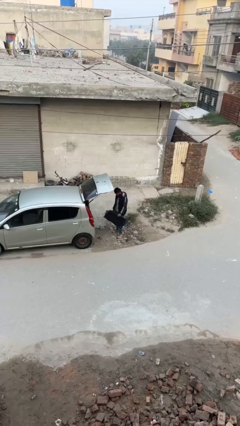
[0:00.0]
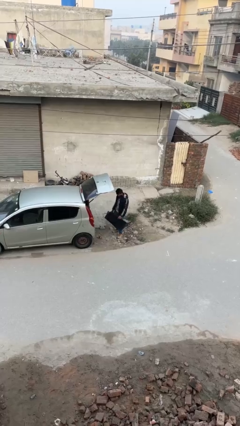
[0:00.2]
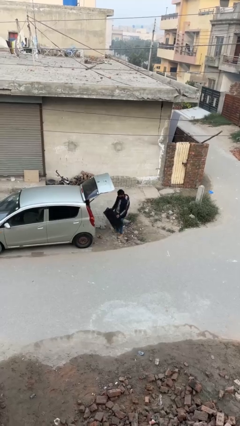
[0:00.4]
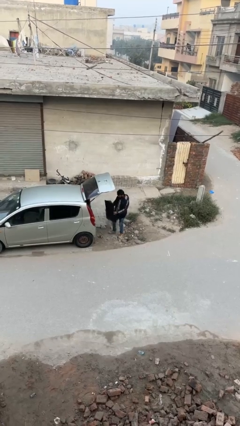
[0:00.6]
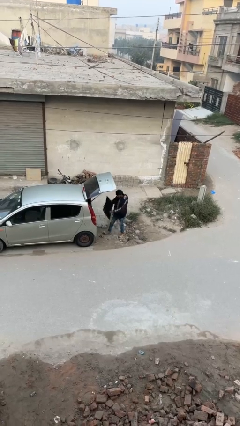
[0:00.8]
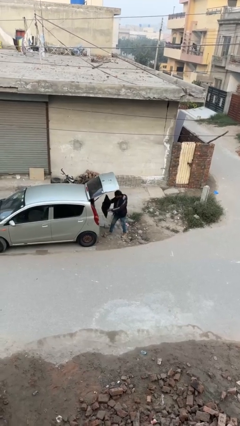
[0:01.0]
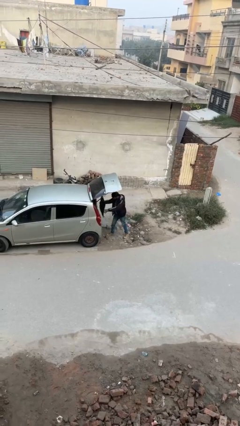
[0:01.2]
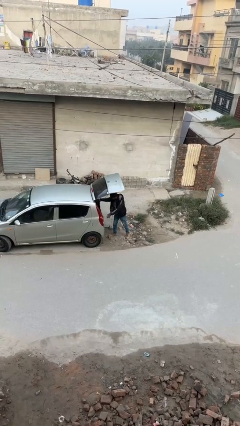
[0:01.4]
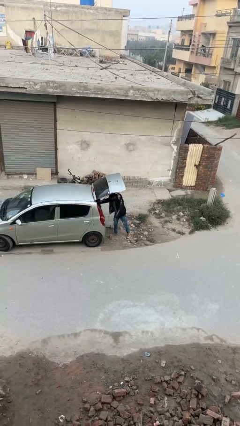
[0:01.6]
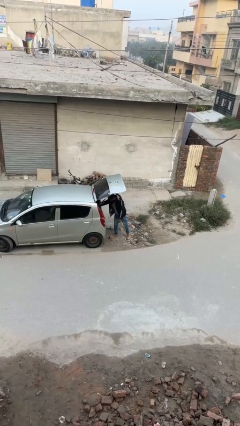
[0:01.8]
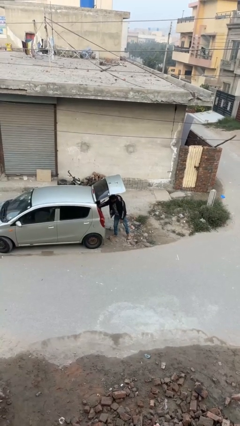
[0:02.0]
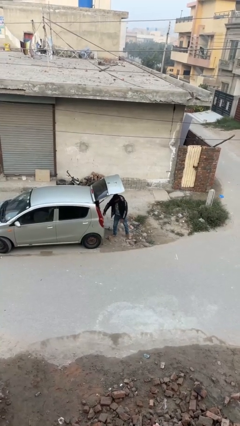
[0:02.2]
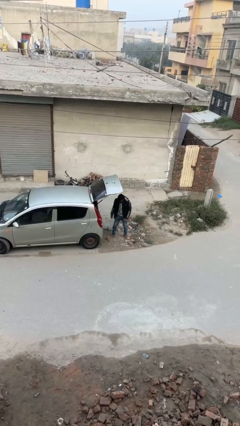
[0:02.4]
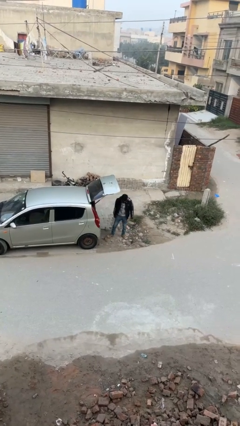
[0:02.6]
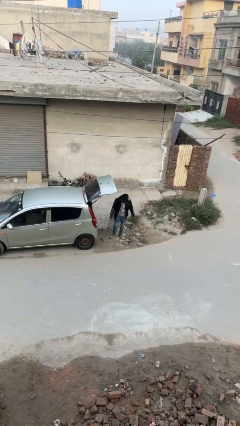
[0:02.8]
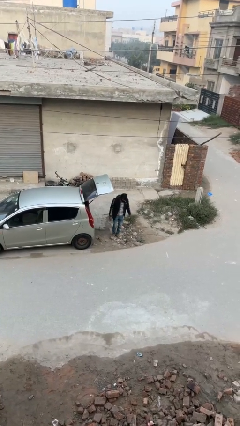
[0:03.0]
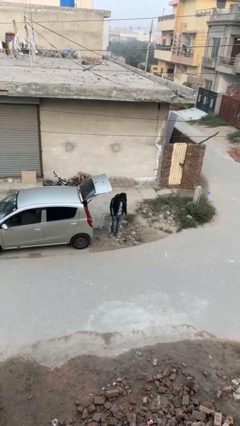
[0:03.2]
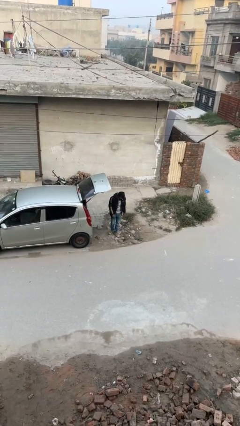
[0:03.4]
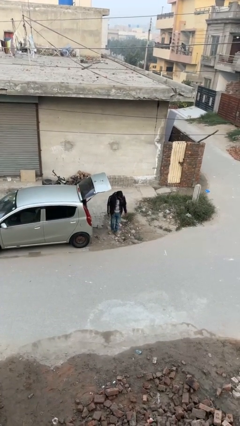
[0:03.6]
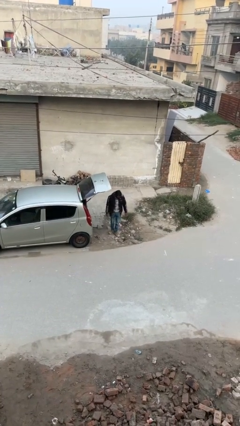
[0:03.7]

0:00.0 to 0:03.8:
person loads car

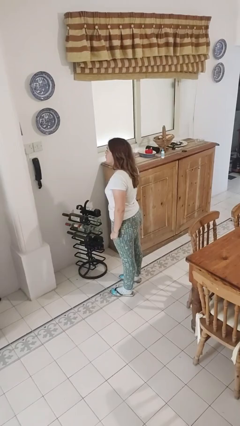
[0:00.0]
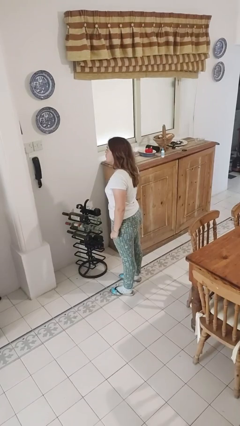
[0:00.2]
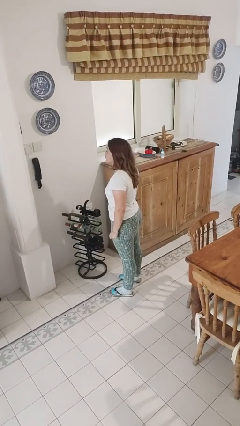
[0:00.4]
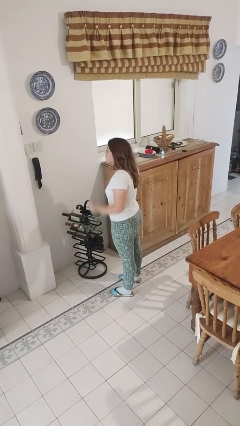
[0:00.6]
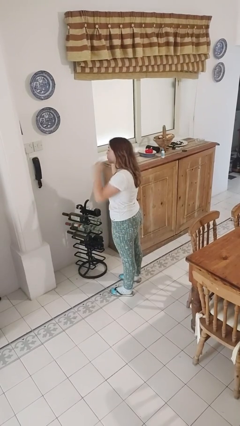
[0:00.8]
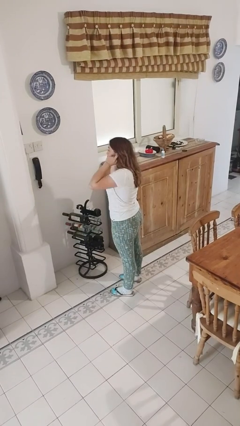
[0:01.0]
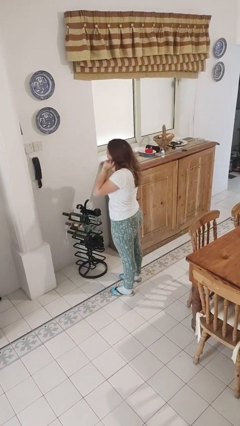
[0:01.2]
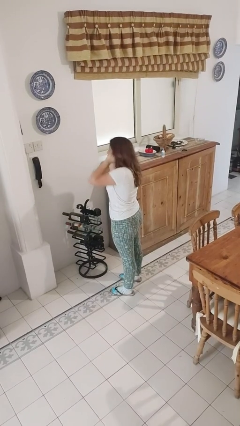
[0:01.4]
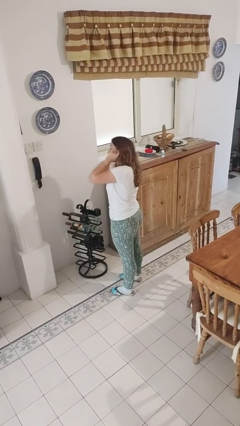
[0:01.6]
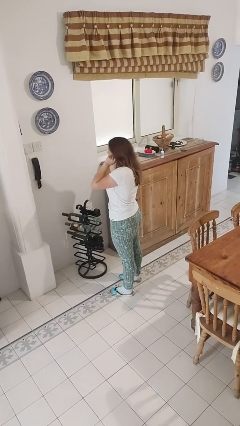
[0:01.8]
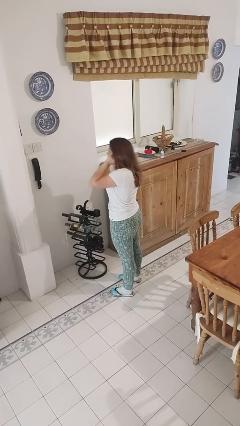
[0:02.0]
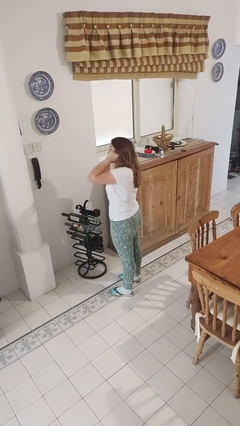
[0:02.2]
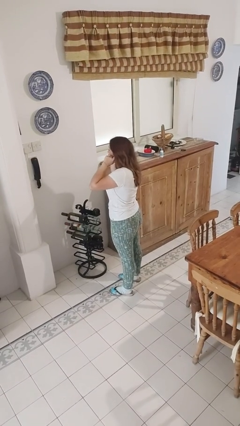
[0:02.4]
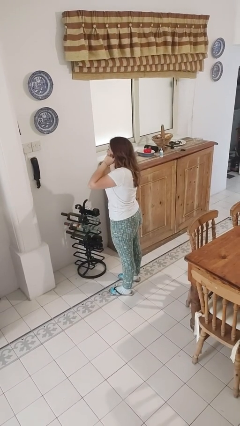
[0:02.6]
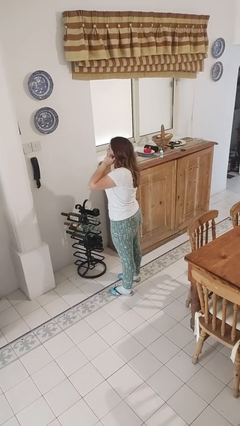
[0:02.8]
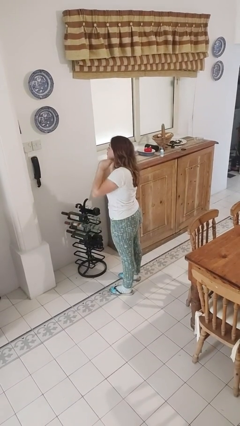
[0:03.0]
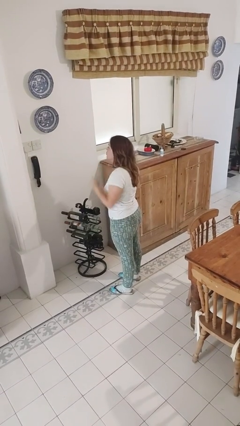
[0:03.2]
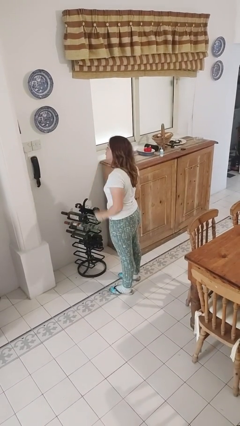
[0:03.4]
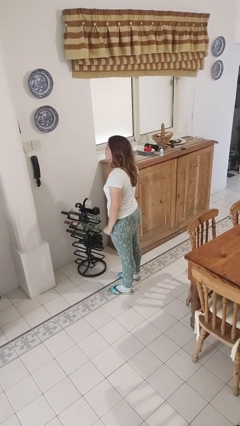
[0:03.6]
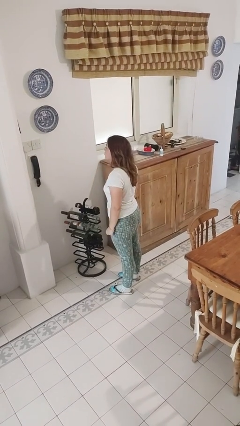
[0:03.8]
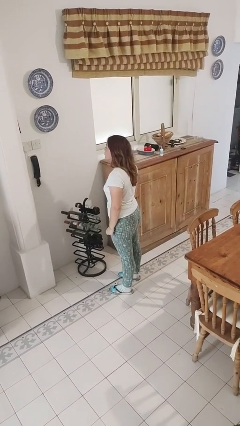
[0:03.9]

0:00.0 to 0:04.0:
person puts fingers in ear

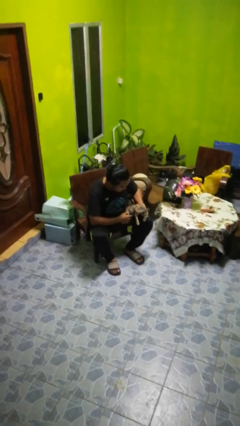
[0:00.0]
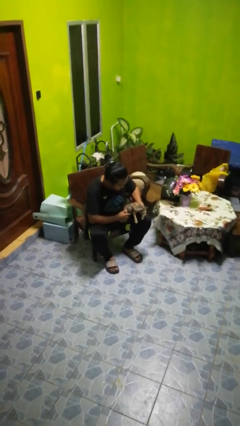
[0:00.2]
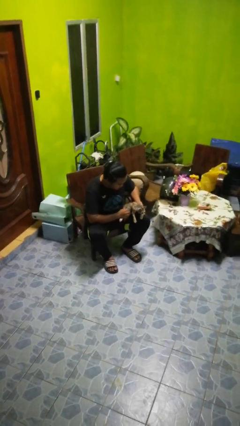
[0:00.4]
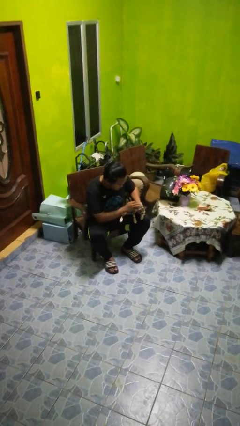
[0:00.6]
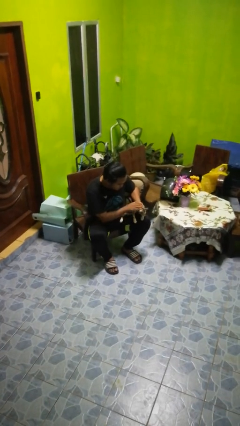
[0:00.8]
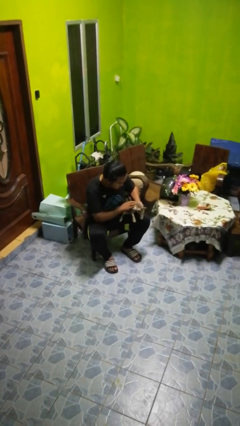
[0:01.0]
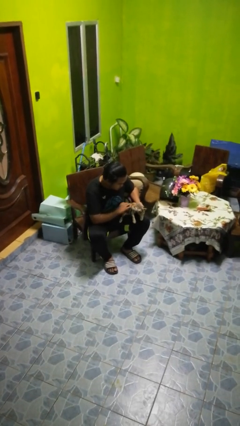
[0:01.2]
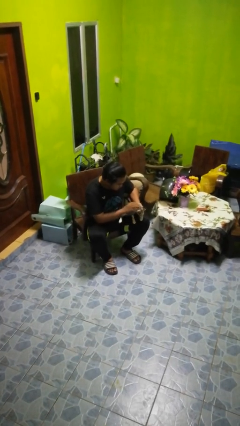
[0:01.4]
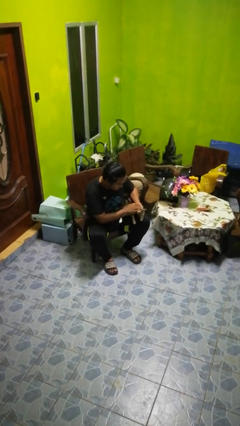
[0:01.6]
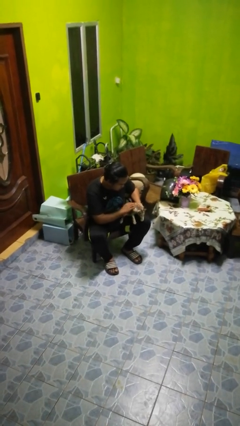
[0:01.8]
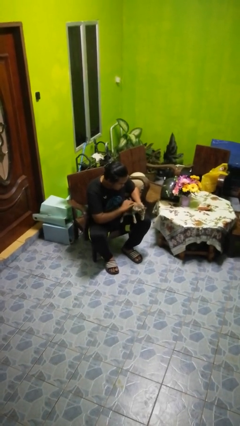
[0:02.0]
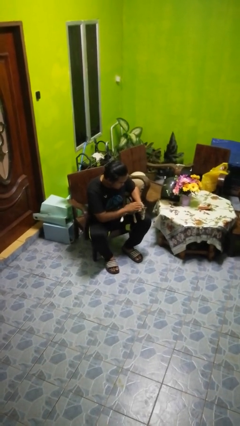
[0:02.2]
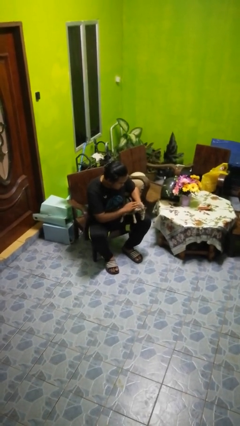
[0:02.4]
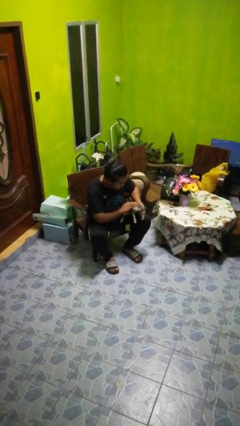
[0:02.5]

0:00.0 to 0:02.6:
person pets cat

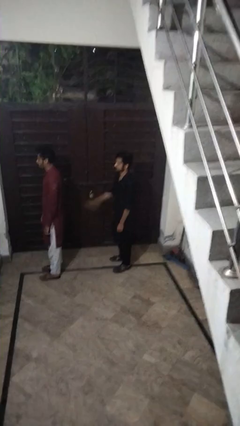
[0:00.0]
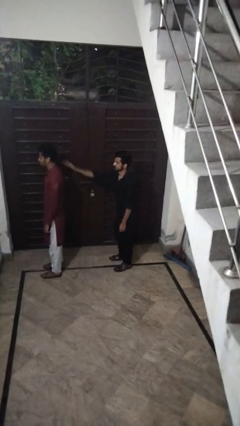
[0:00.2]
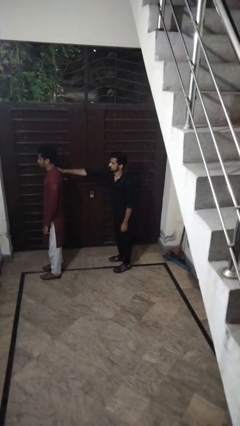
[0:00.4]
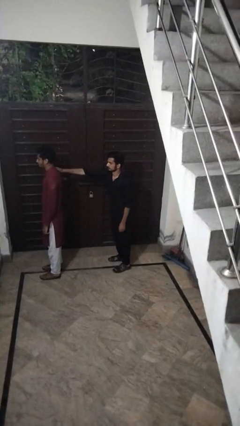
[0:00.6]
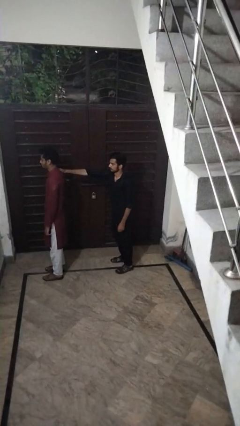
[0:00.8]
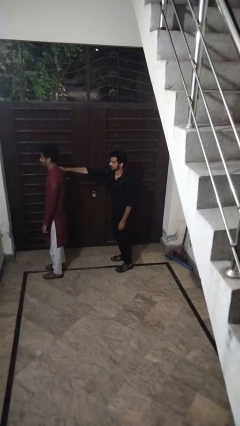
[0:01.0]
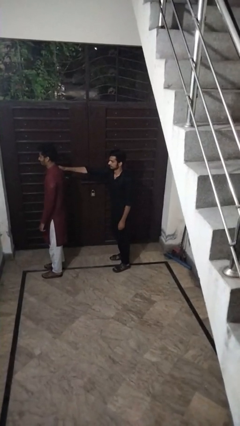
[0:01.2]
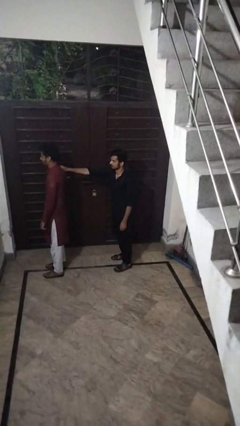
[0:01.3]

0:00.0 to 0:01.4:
person grabs person by shoulder

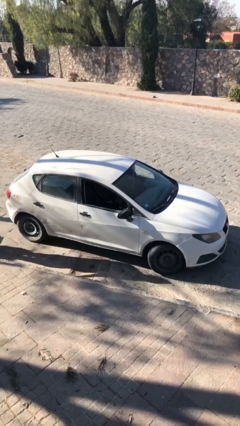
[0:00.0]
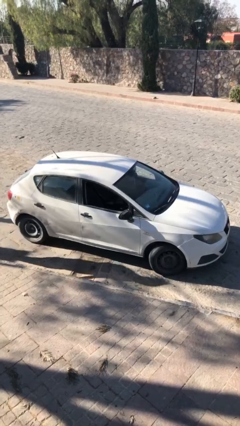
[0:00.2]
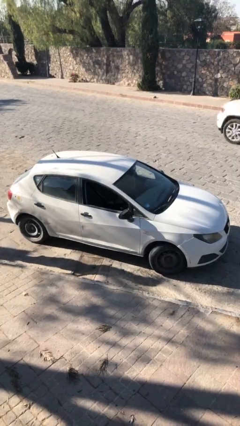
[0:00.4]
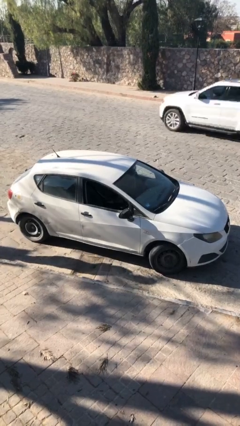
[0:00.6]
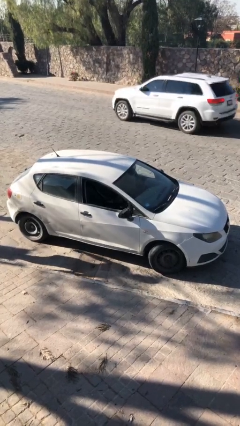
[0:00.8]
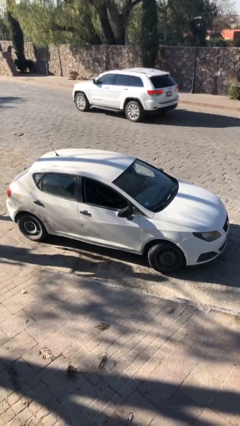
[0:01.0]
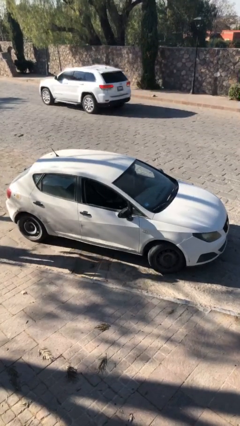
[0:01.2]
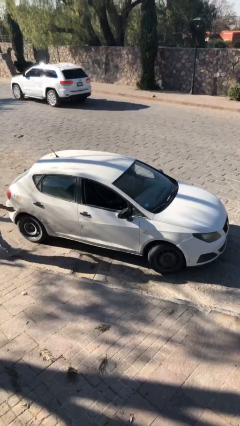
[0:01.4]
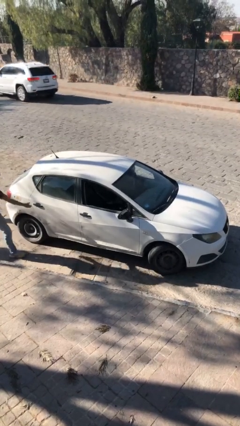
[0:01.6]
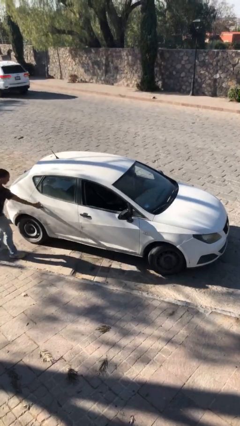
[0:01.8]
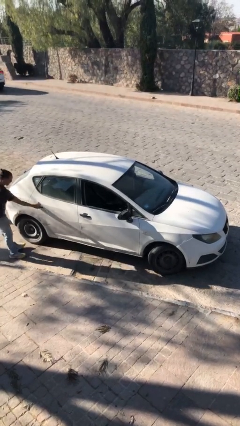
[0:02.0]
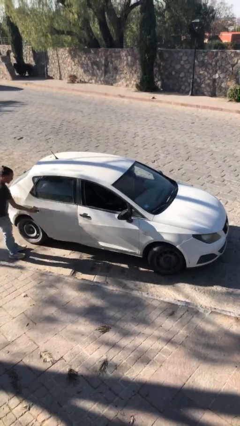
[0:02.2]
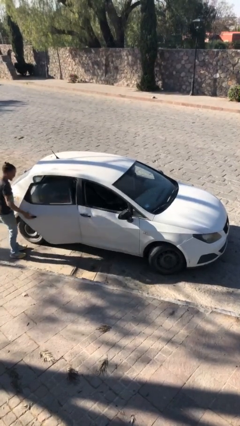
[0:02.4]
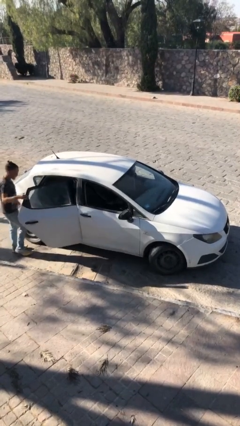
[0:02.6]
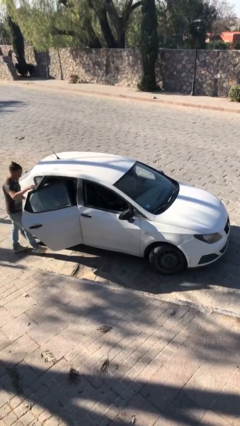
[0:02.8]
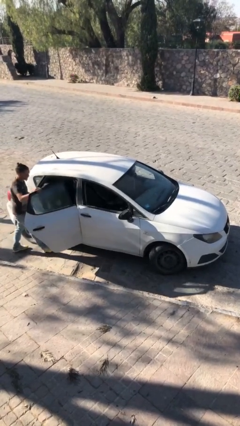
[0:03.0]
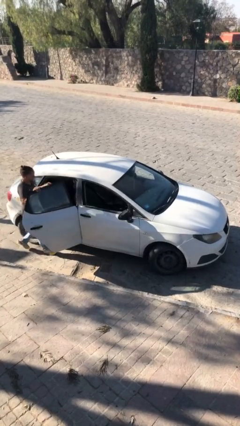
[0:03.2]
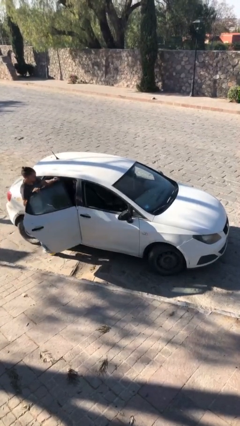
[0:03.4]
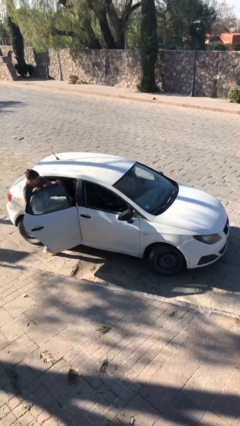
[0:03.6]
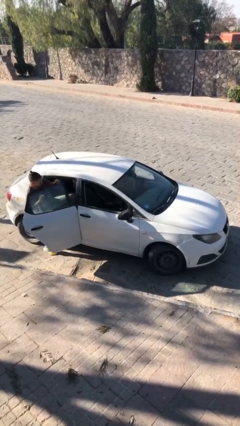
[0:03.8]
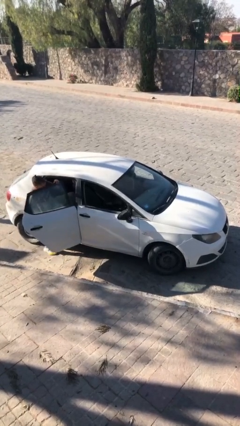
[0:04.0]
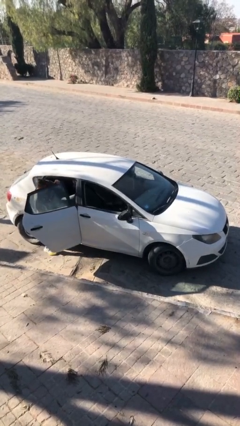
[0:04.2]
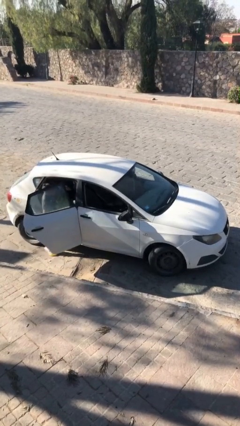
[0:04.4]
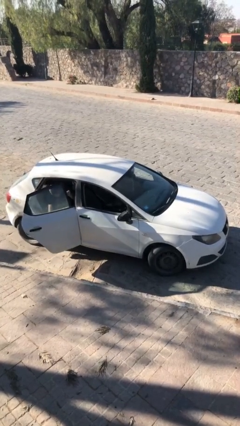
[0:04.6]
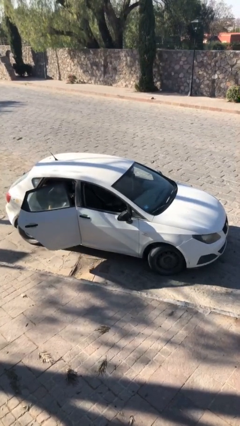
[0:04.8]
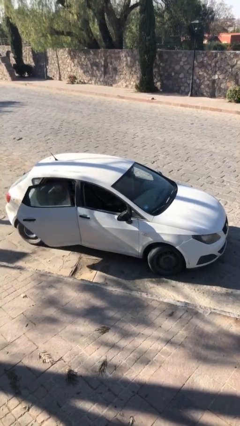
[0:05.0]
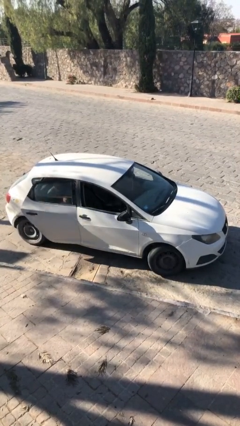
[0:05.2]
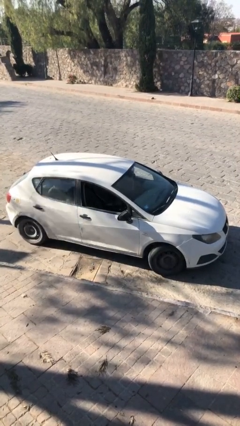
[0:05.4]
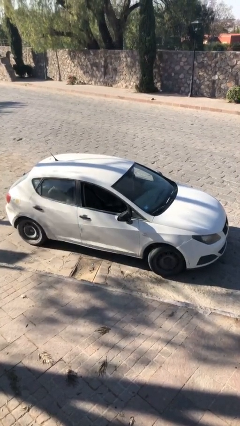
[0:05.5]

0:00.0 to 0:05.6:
car picks up person
